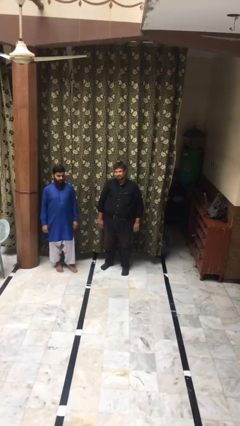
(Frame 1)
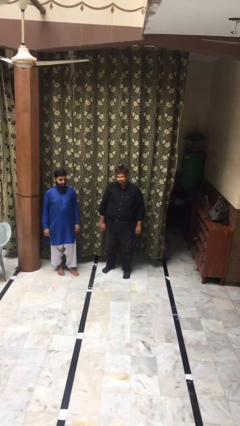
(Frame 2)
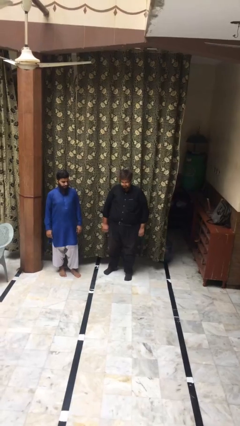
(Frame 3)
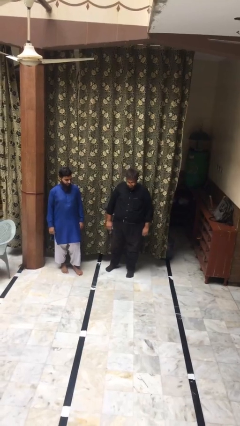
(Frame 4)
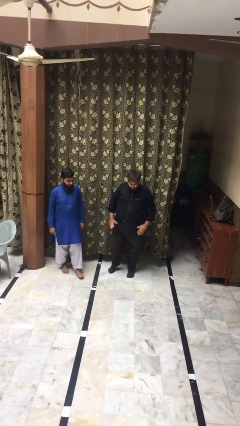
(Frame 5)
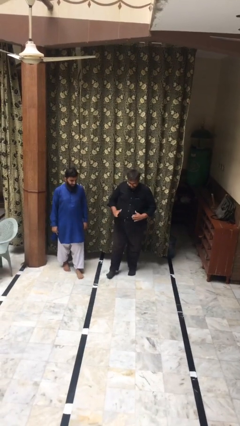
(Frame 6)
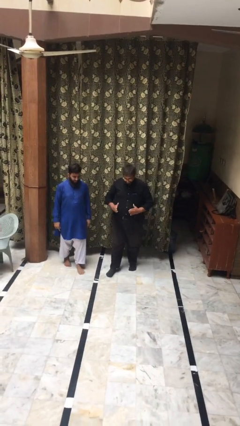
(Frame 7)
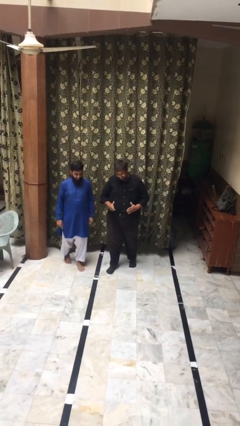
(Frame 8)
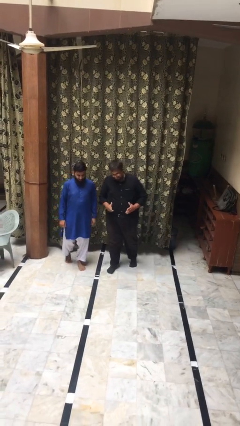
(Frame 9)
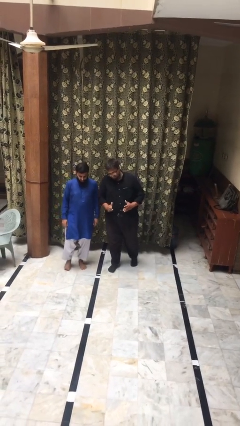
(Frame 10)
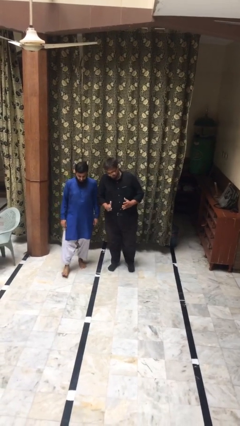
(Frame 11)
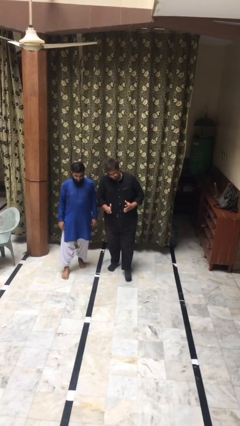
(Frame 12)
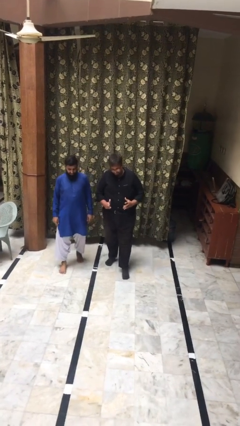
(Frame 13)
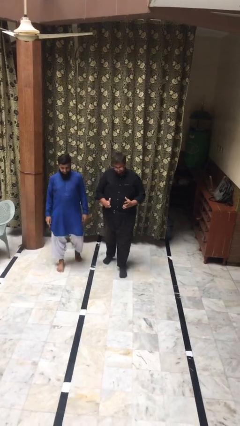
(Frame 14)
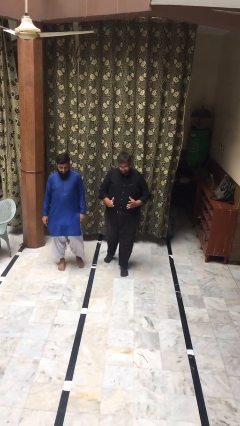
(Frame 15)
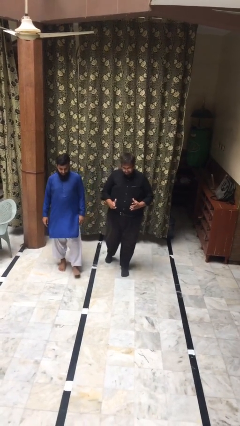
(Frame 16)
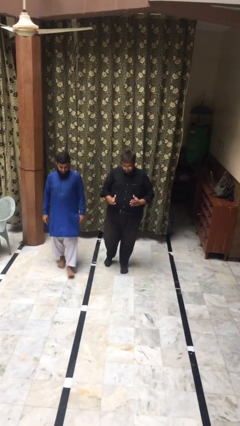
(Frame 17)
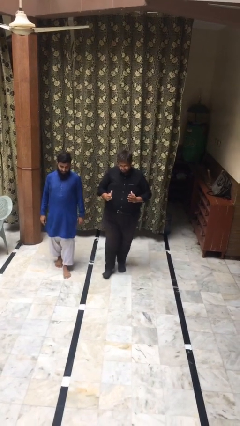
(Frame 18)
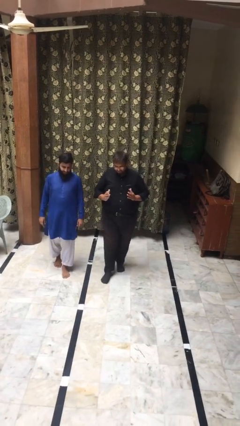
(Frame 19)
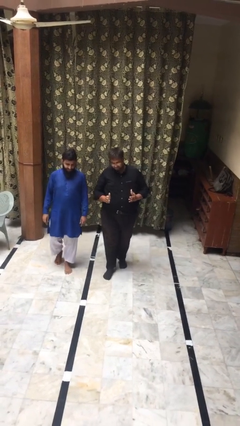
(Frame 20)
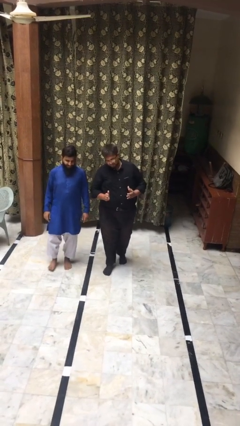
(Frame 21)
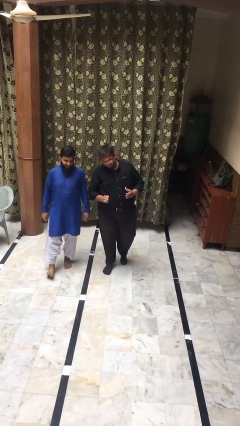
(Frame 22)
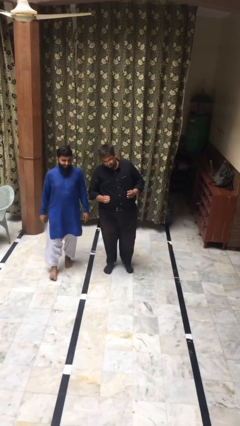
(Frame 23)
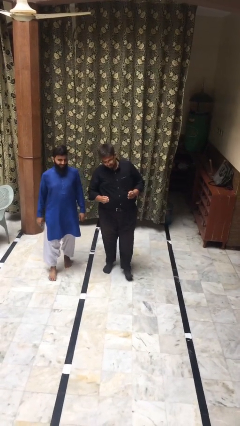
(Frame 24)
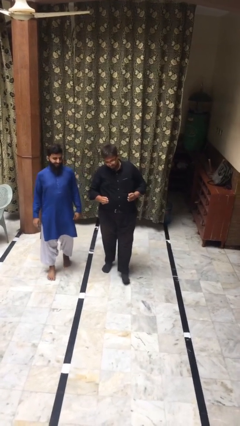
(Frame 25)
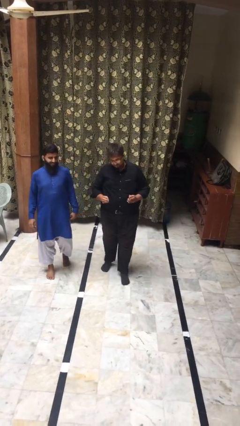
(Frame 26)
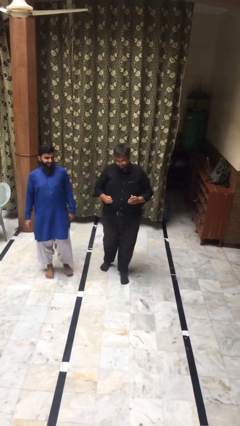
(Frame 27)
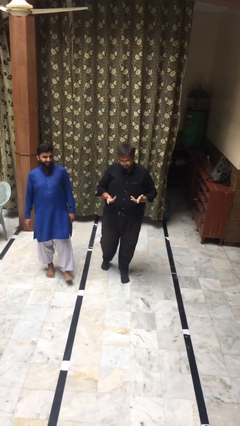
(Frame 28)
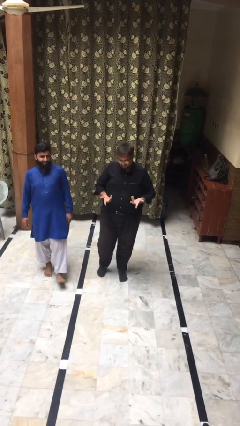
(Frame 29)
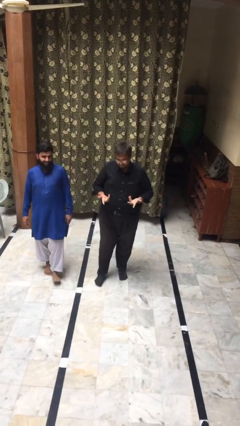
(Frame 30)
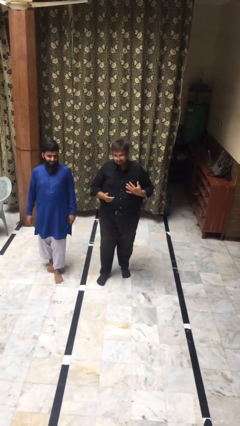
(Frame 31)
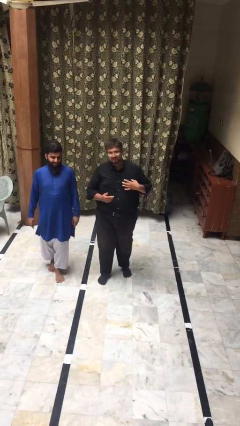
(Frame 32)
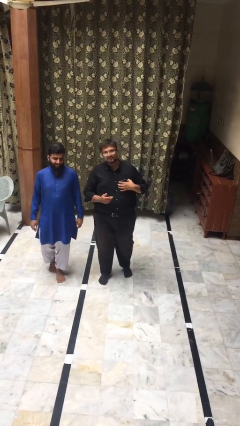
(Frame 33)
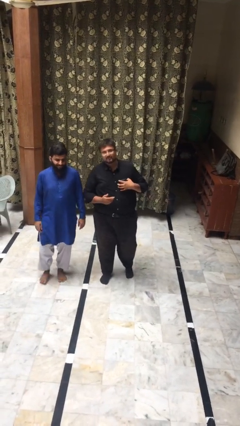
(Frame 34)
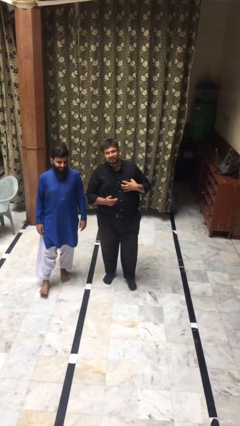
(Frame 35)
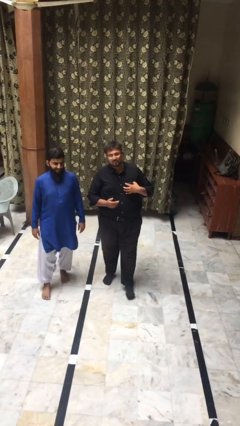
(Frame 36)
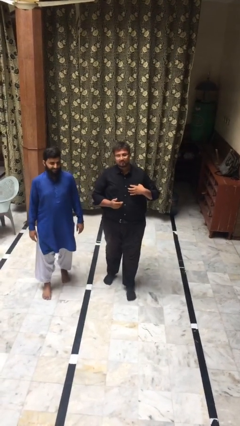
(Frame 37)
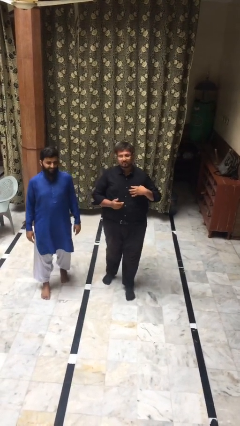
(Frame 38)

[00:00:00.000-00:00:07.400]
person talks to person

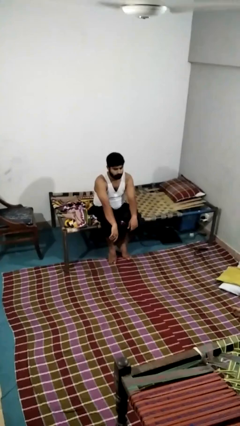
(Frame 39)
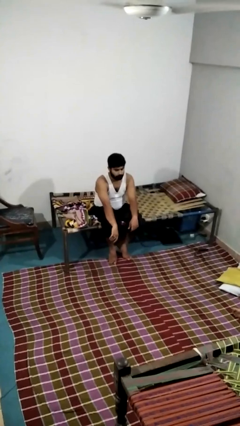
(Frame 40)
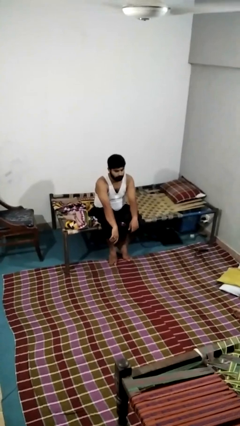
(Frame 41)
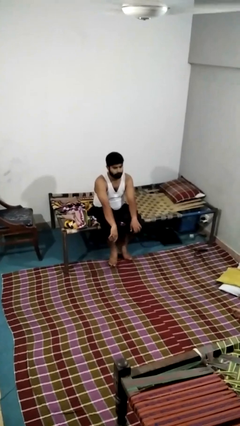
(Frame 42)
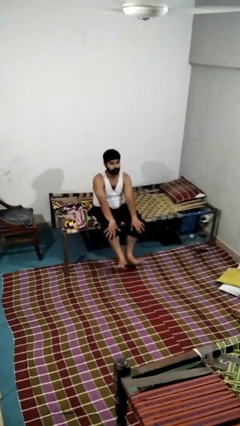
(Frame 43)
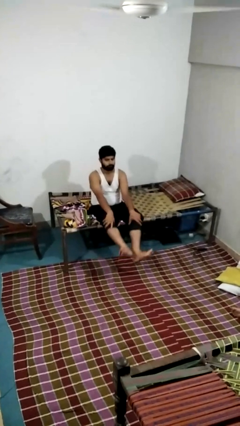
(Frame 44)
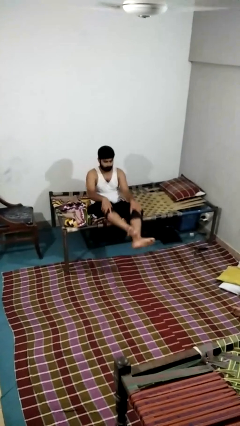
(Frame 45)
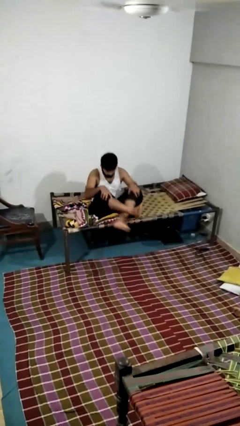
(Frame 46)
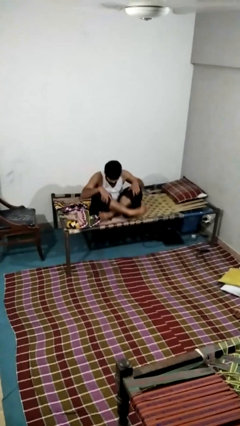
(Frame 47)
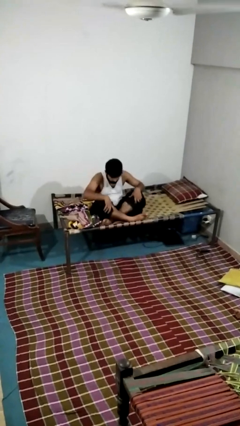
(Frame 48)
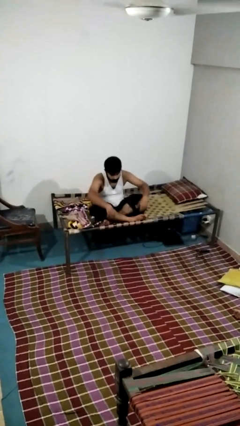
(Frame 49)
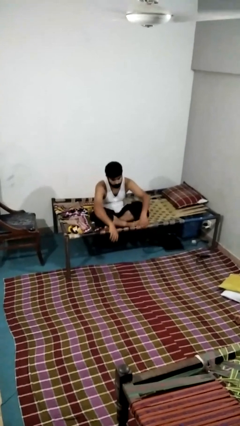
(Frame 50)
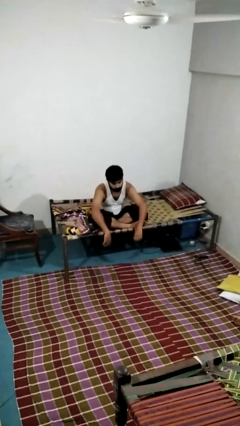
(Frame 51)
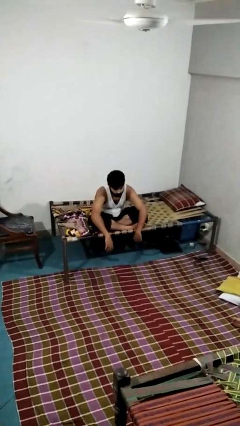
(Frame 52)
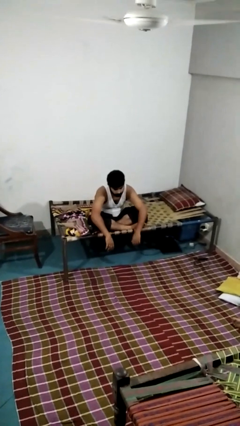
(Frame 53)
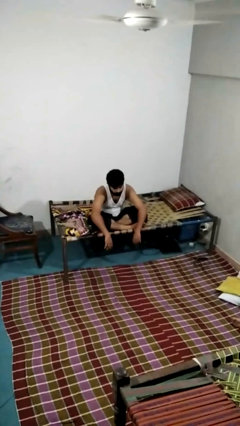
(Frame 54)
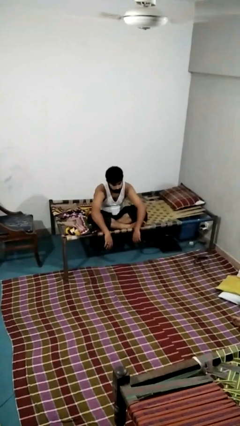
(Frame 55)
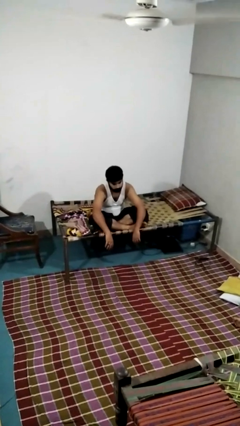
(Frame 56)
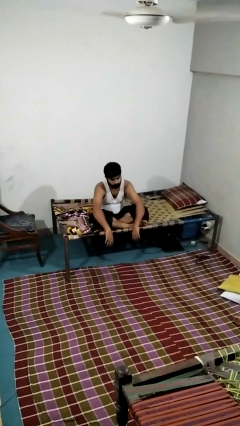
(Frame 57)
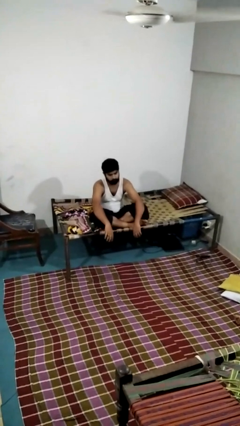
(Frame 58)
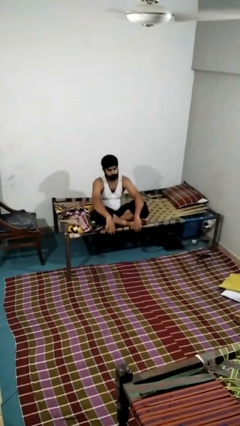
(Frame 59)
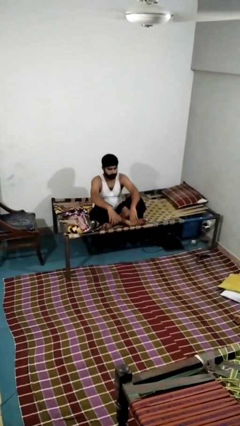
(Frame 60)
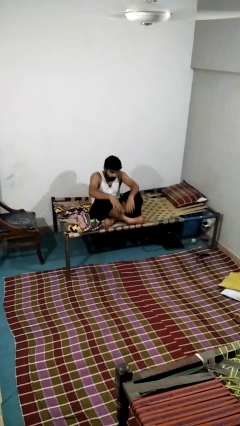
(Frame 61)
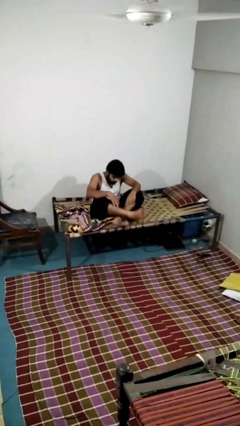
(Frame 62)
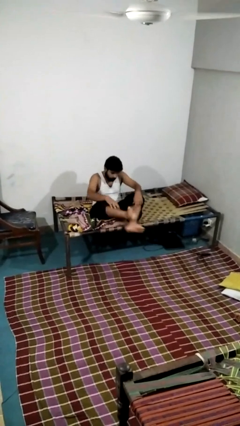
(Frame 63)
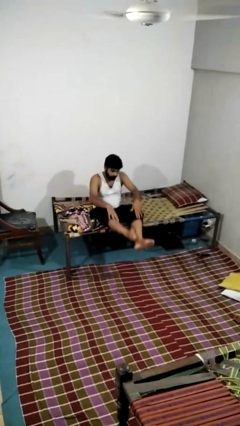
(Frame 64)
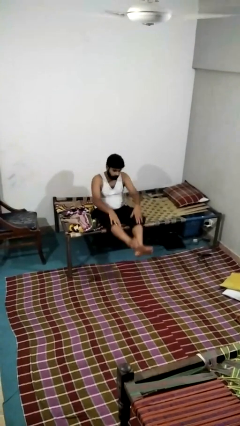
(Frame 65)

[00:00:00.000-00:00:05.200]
person crosses legs

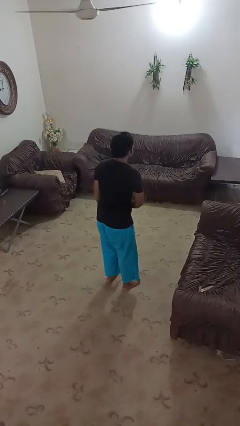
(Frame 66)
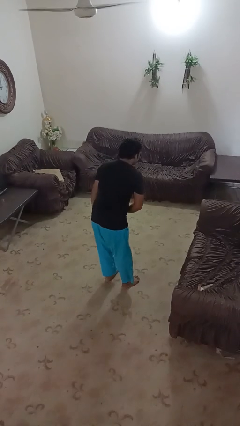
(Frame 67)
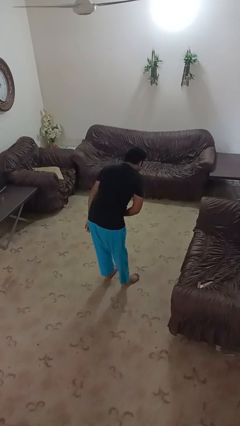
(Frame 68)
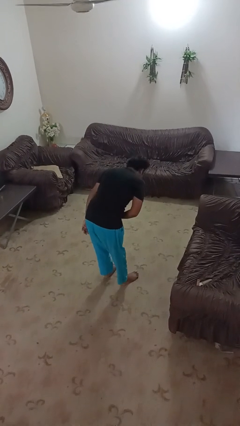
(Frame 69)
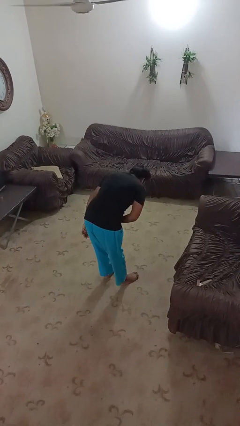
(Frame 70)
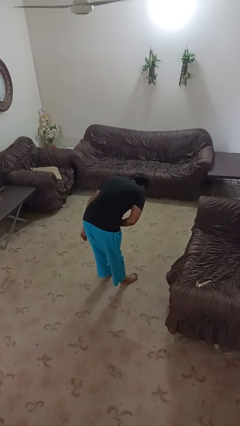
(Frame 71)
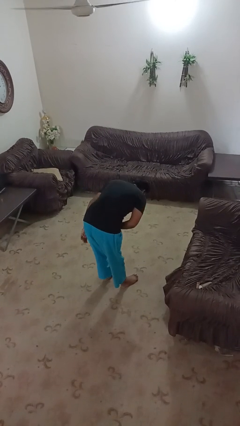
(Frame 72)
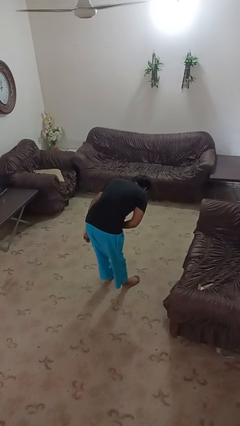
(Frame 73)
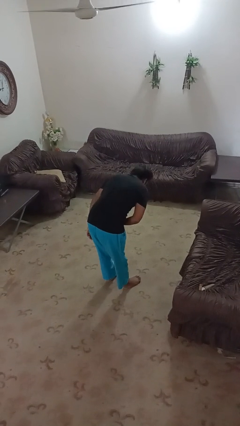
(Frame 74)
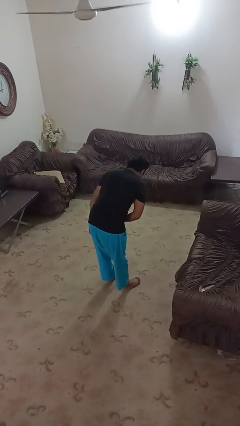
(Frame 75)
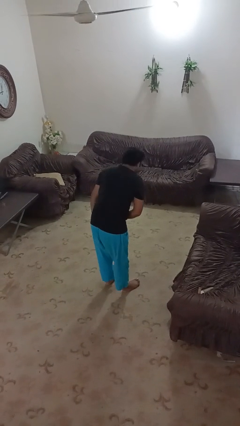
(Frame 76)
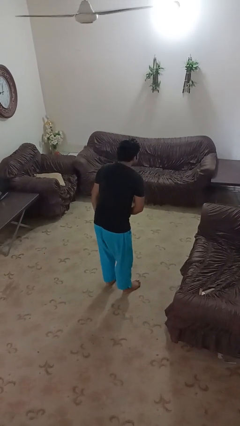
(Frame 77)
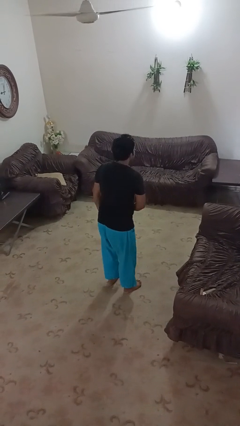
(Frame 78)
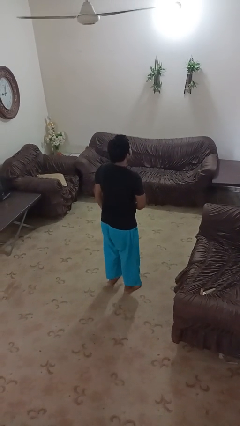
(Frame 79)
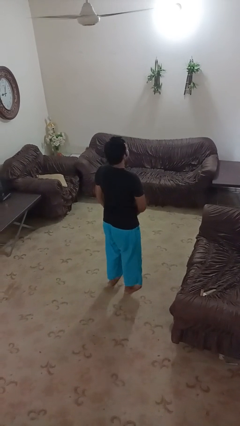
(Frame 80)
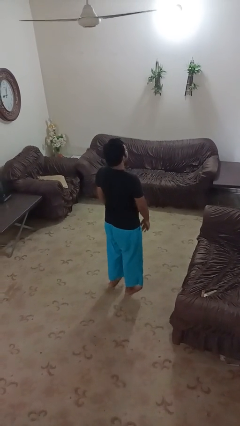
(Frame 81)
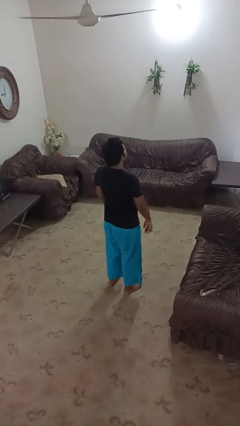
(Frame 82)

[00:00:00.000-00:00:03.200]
person bows

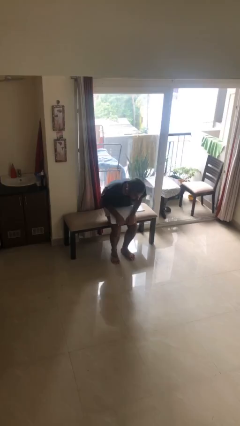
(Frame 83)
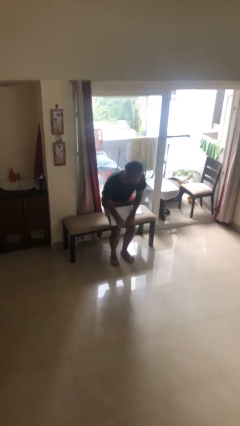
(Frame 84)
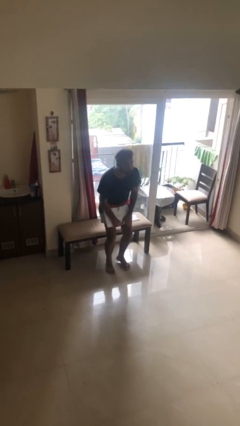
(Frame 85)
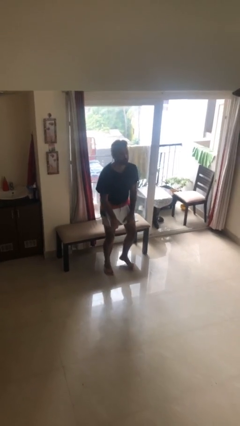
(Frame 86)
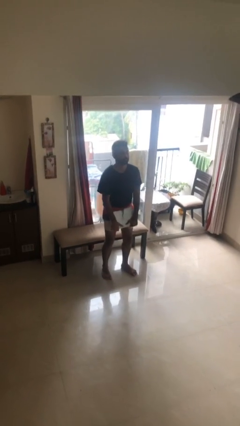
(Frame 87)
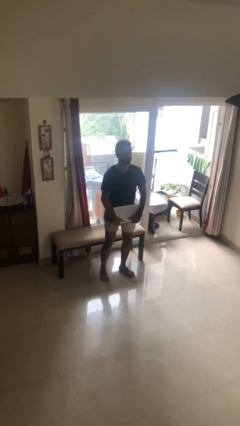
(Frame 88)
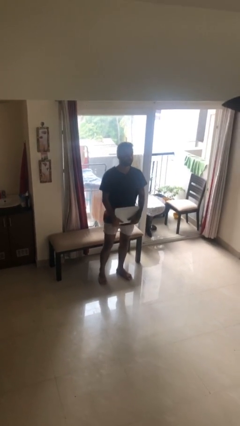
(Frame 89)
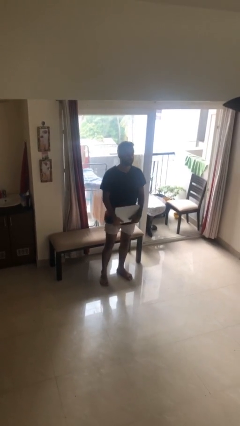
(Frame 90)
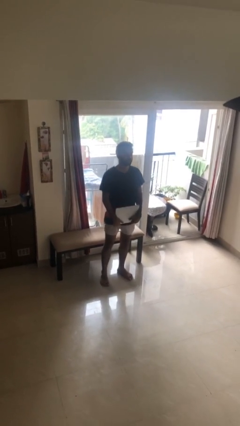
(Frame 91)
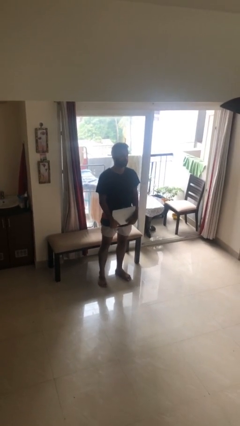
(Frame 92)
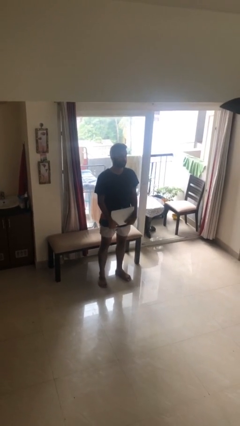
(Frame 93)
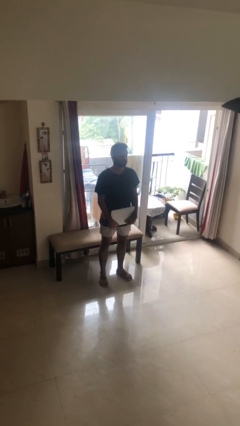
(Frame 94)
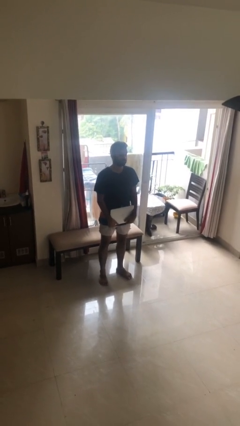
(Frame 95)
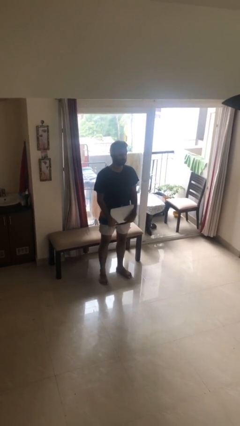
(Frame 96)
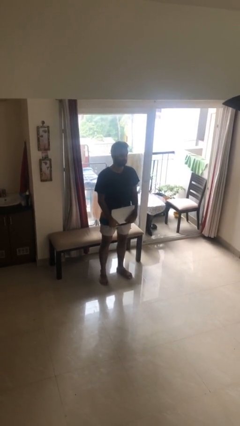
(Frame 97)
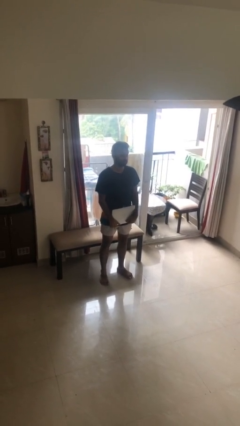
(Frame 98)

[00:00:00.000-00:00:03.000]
person stands up
